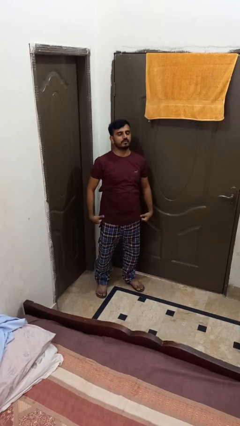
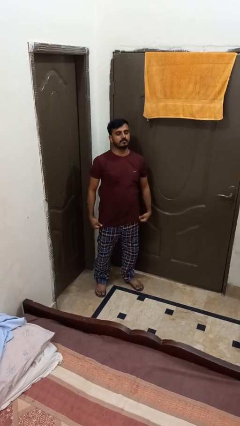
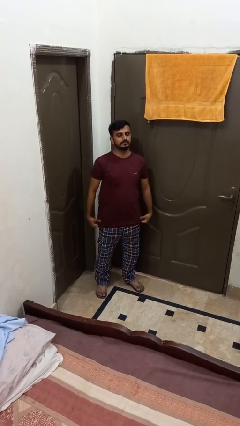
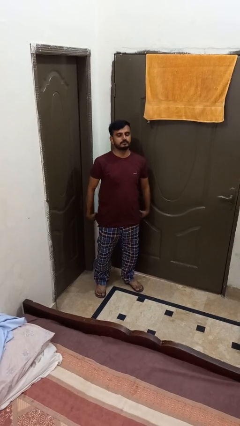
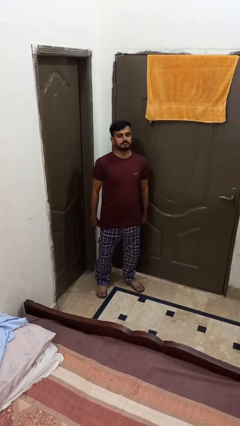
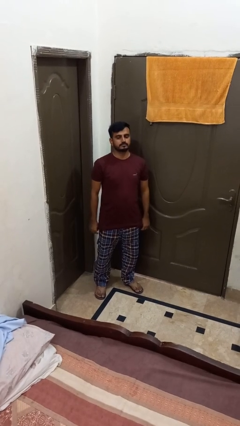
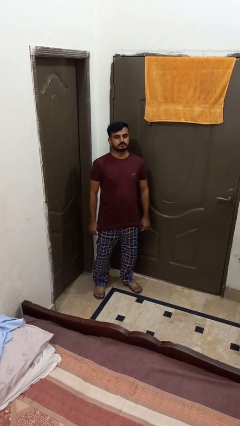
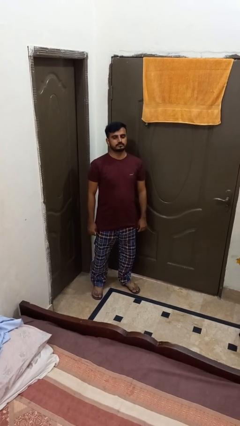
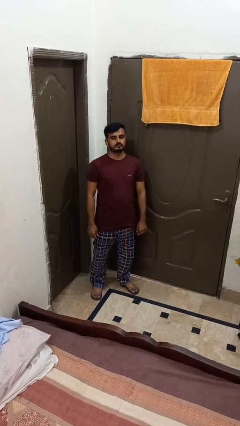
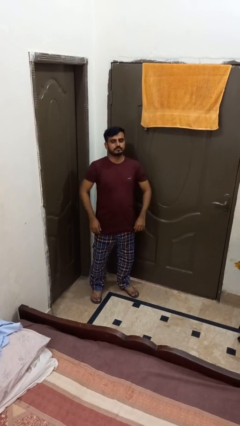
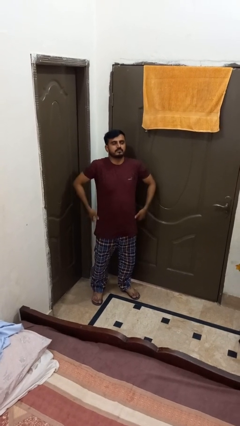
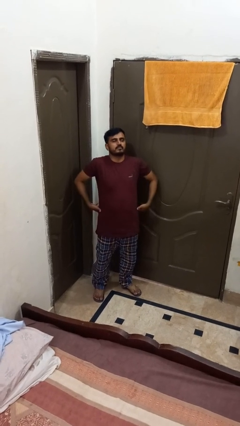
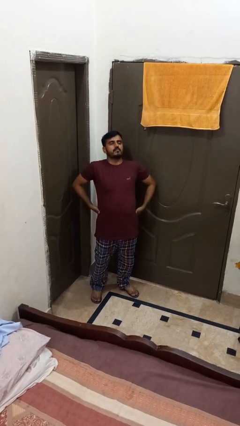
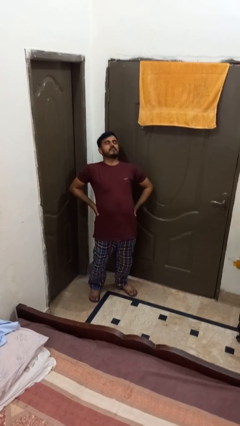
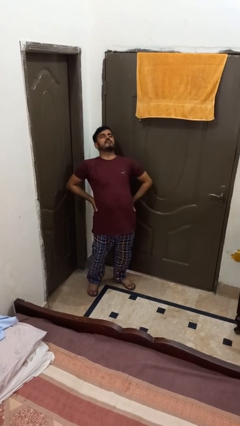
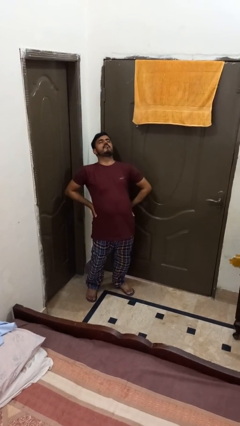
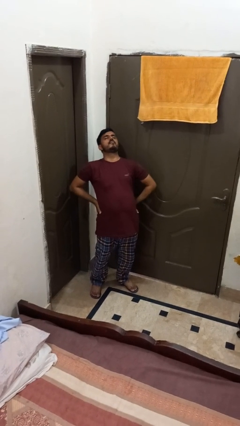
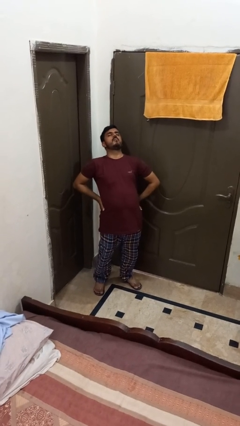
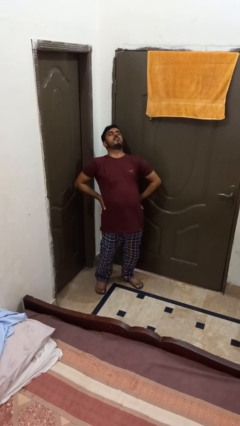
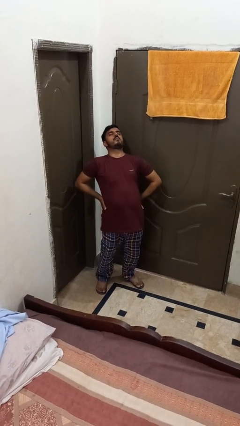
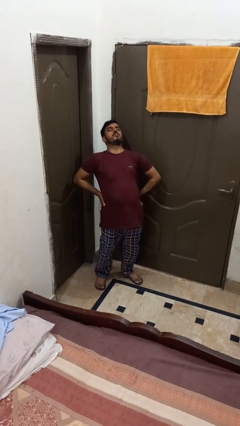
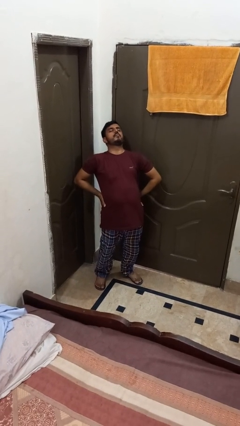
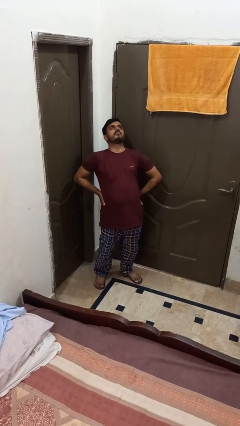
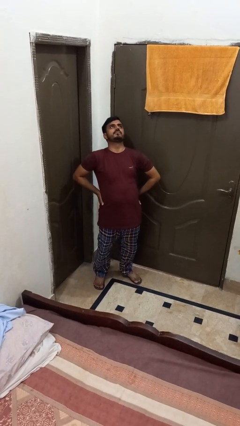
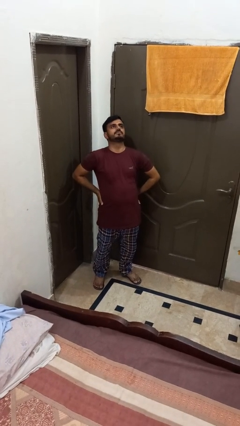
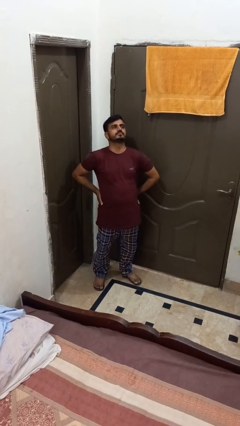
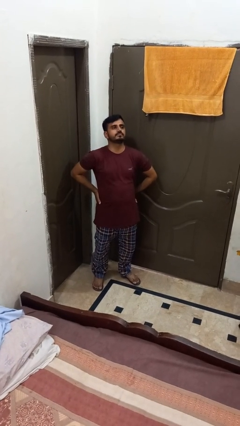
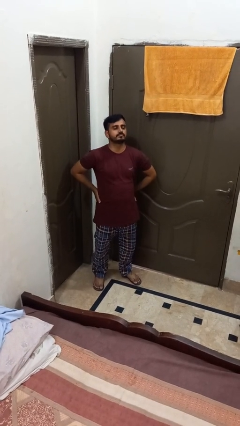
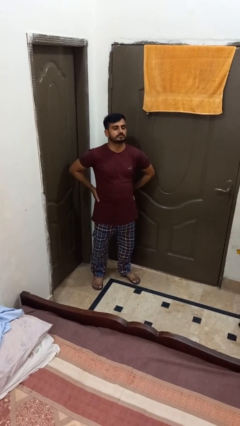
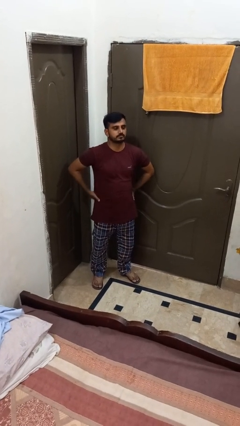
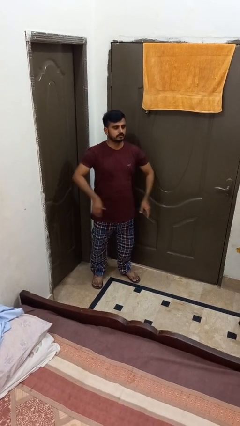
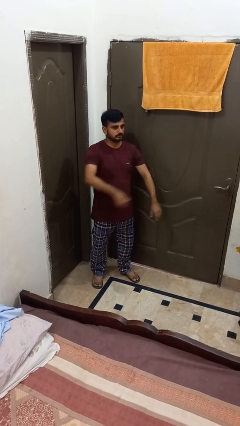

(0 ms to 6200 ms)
person stretches back

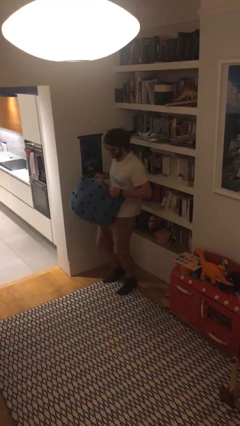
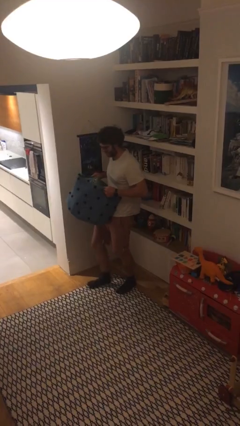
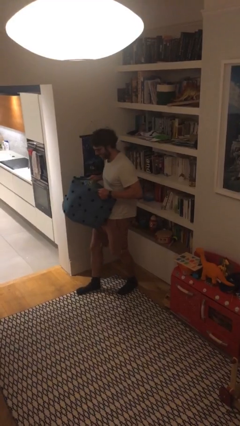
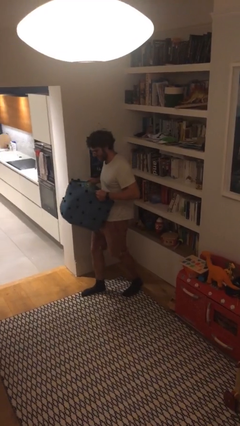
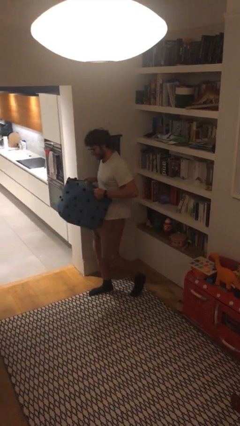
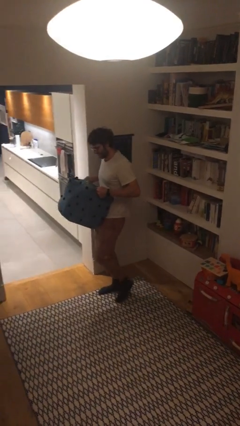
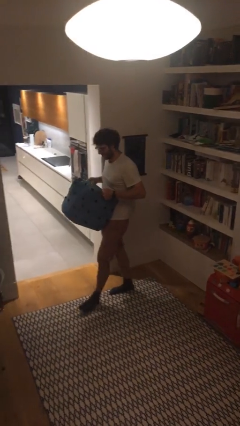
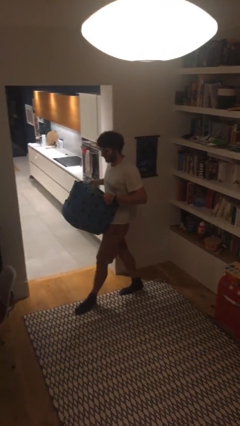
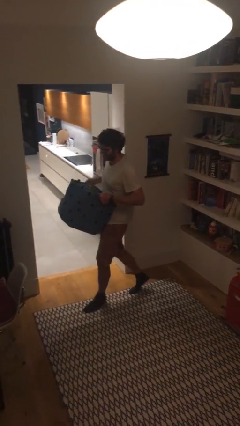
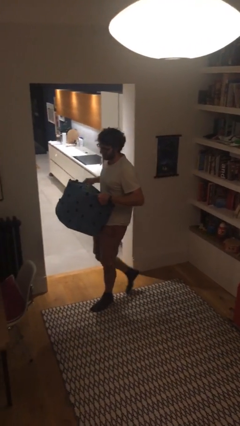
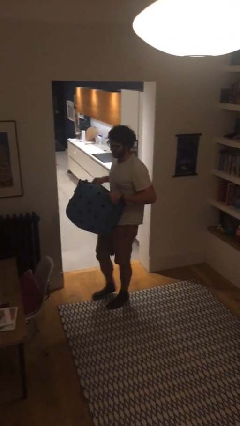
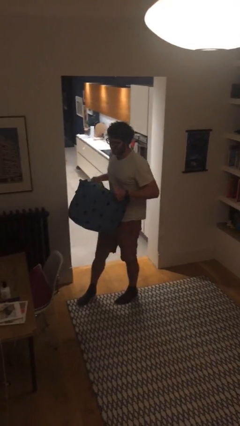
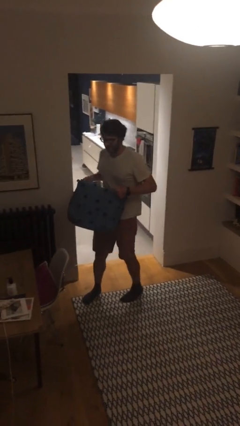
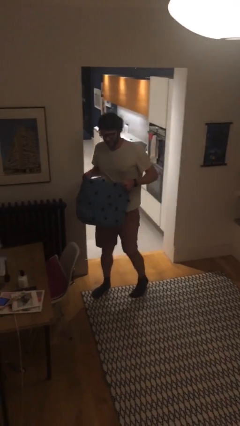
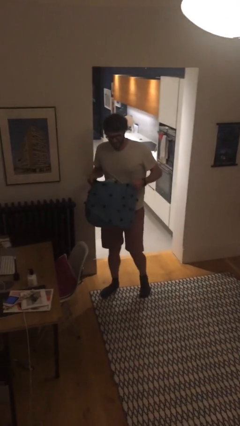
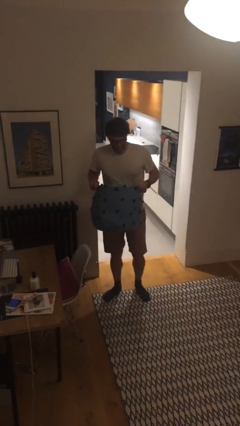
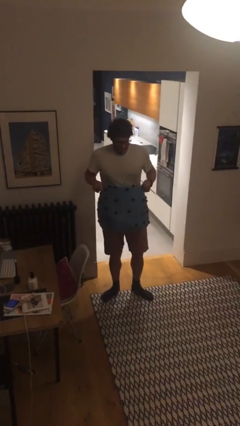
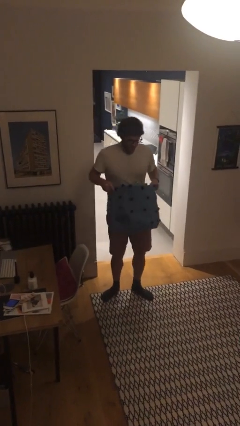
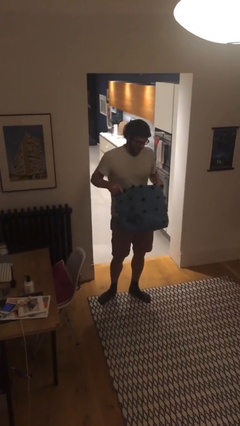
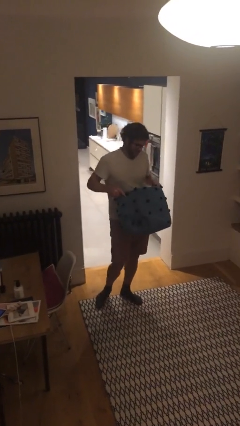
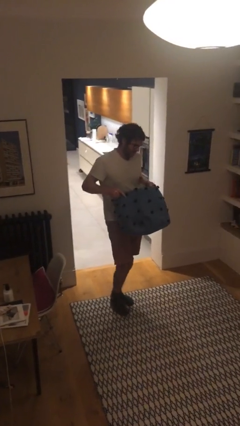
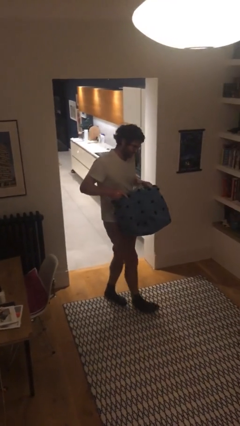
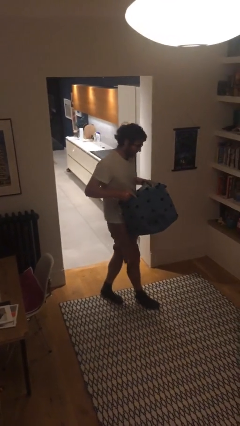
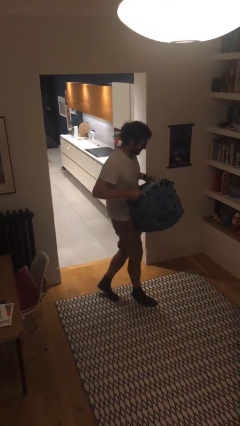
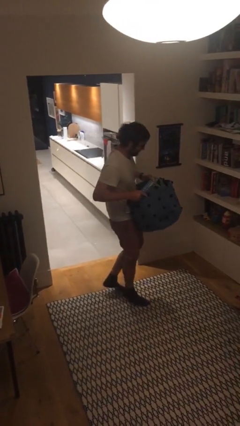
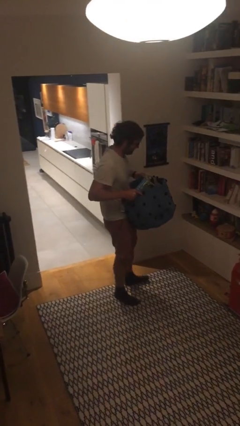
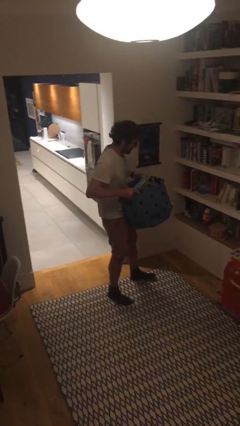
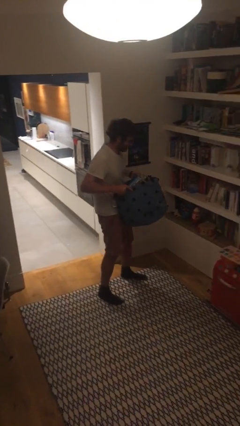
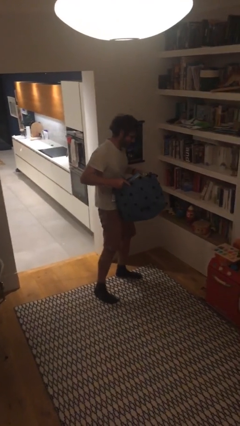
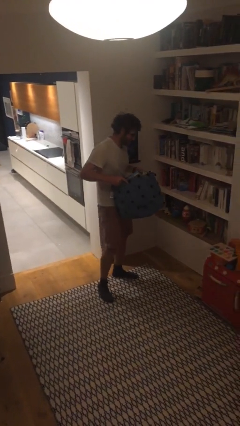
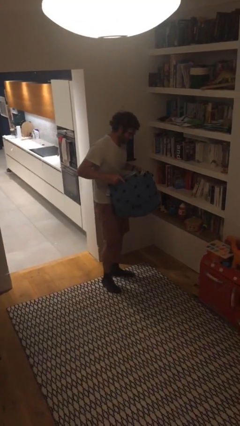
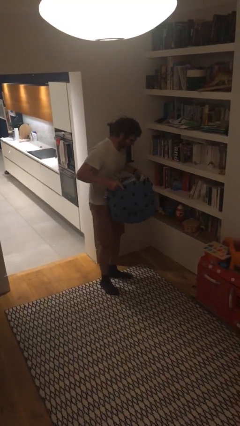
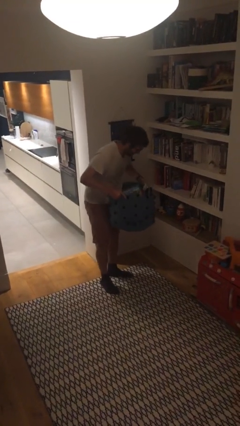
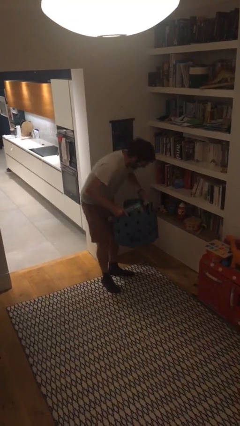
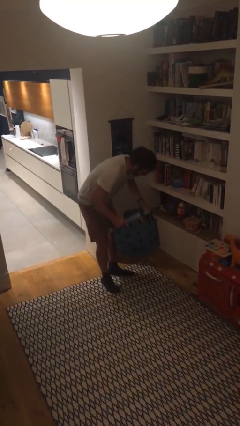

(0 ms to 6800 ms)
person carries heavy object

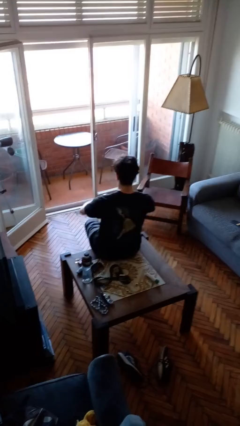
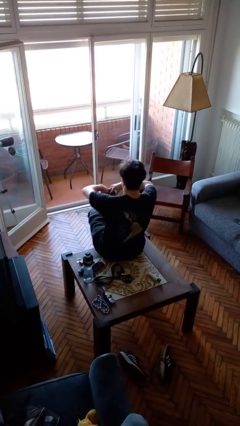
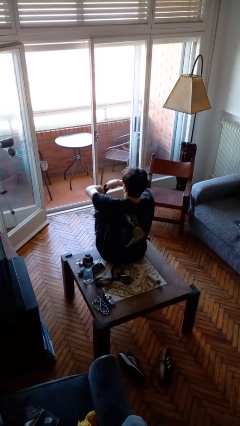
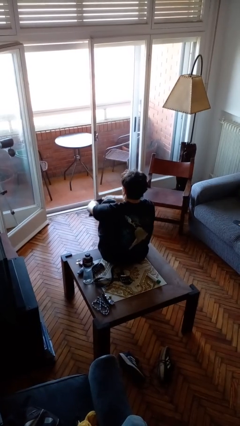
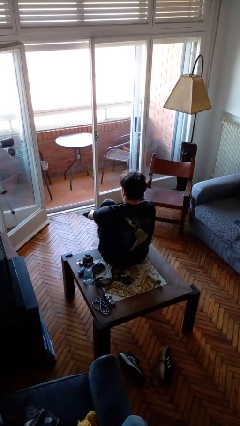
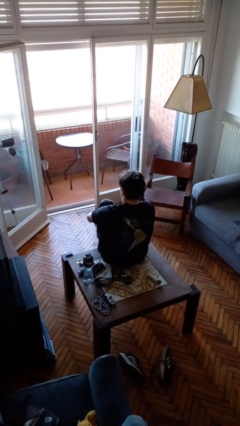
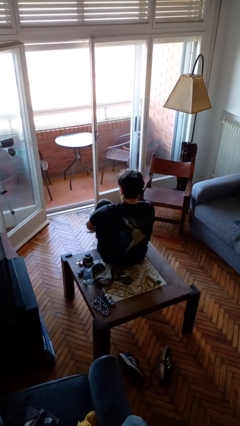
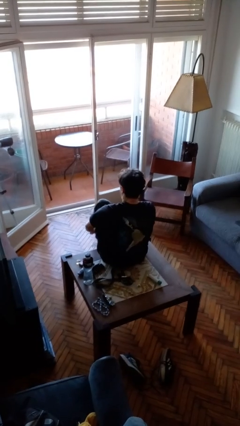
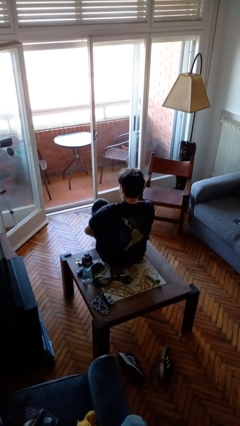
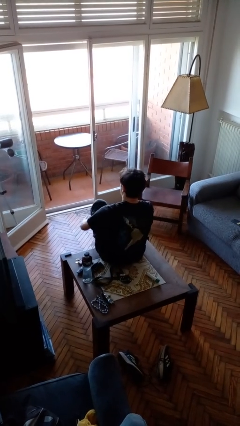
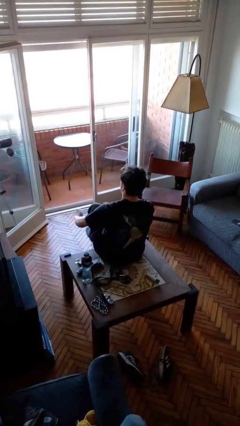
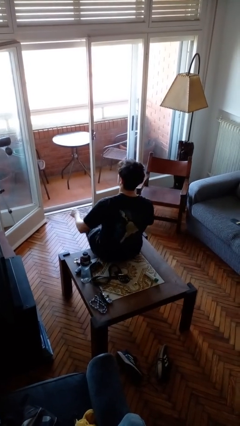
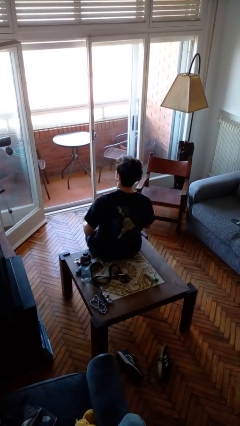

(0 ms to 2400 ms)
person puts on socks

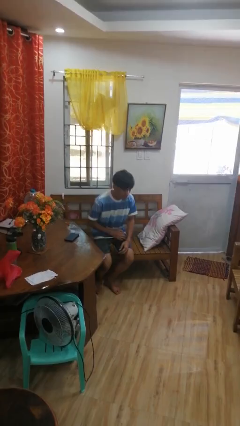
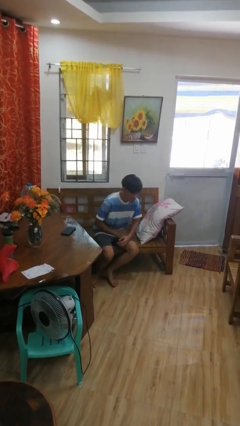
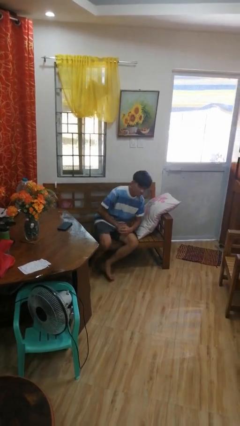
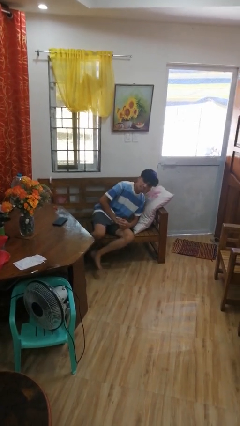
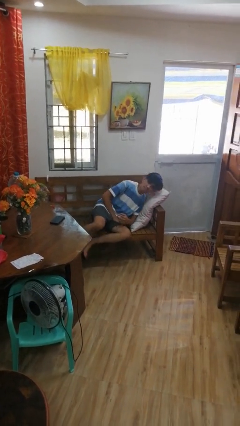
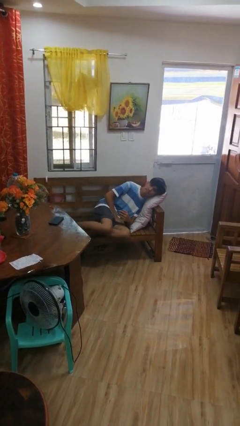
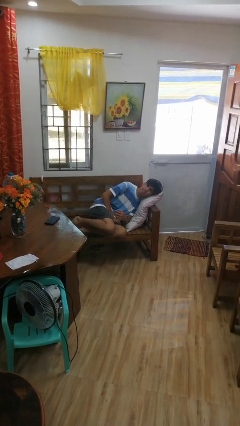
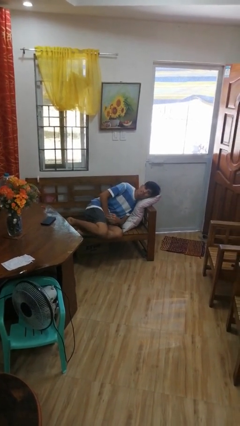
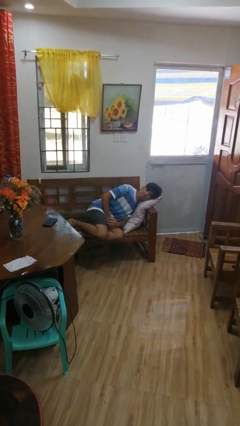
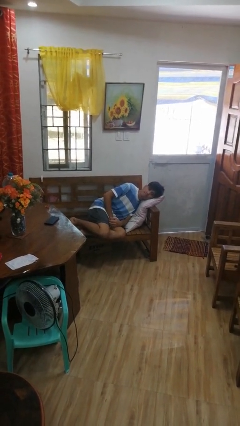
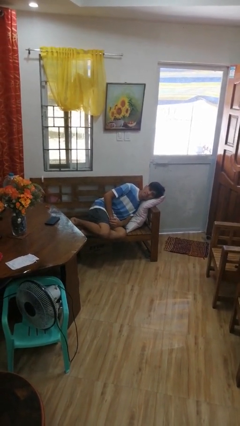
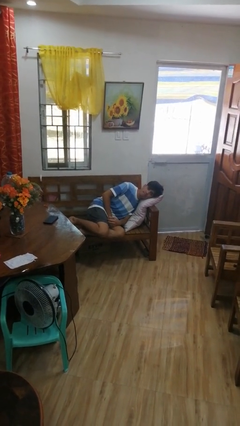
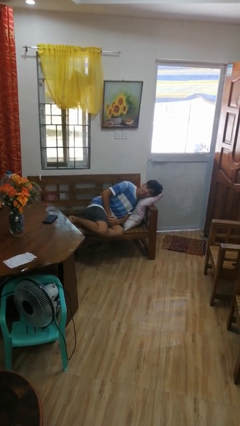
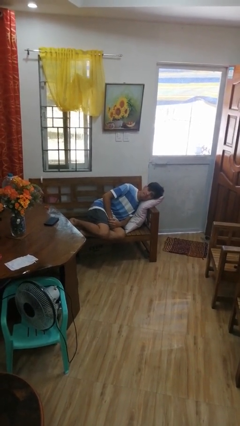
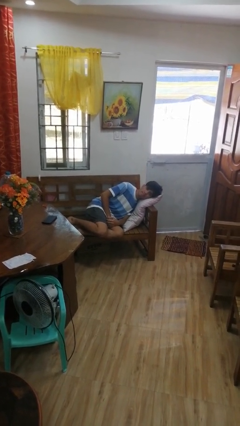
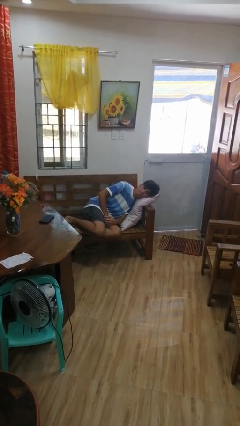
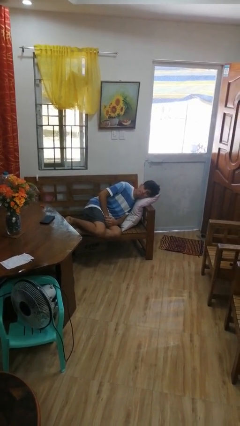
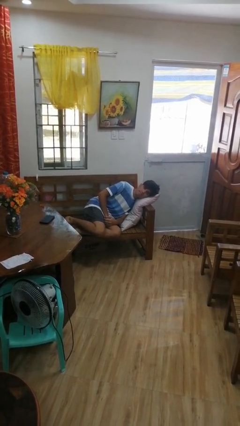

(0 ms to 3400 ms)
person lies down on couch
